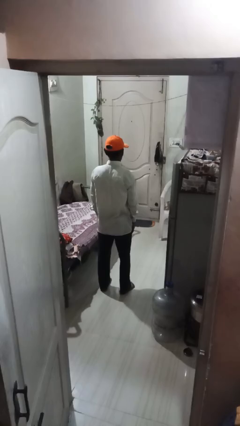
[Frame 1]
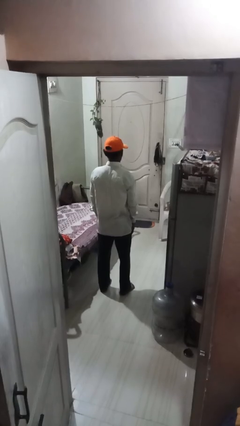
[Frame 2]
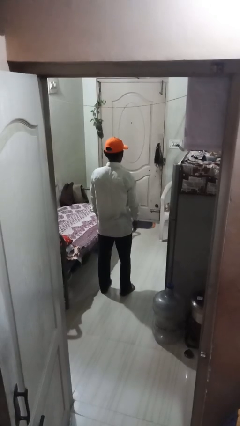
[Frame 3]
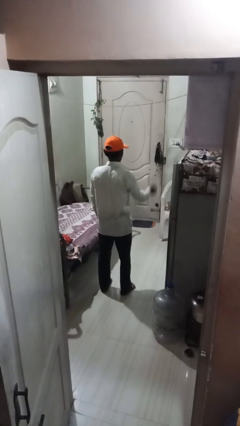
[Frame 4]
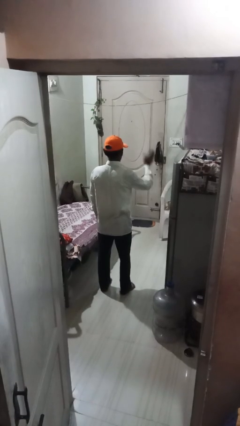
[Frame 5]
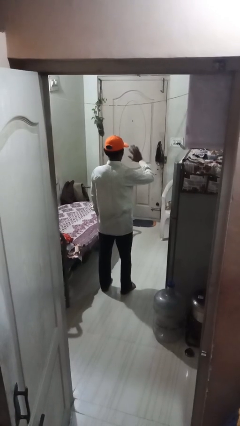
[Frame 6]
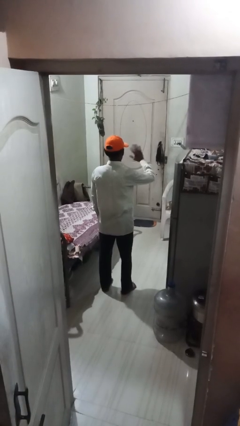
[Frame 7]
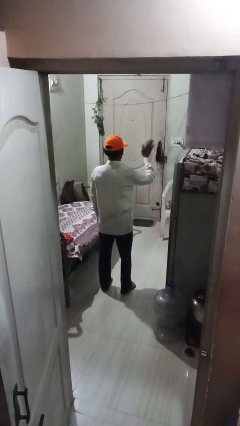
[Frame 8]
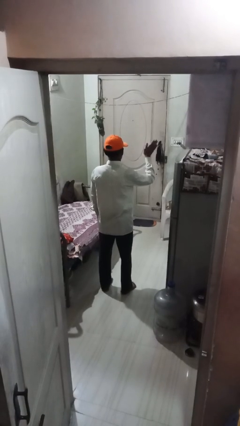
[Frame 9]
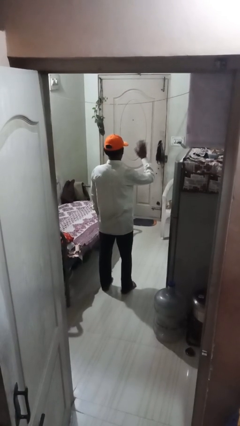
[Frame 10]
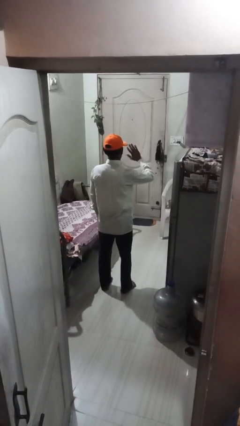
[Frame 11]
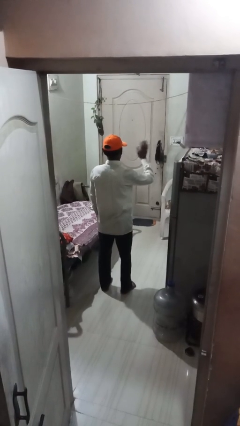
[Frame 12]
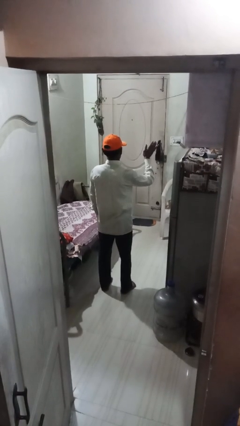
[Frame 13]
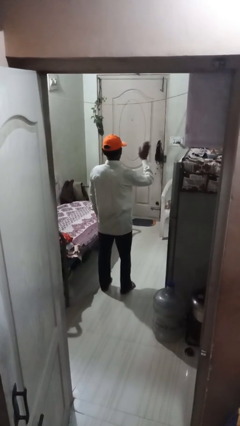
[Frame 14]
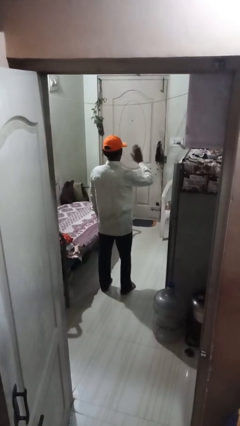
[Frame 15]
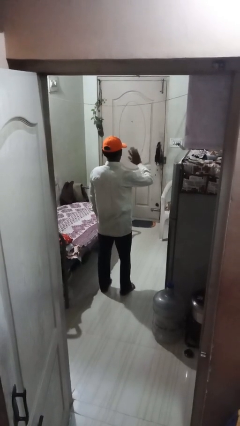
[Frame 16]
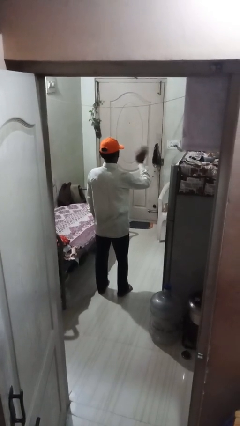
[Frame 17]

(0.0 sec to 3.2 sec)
person waves at person

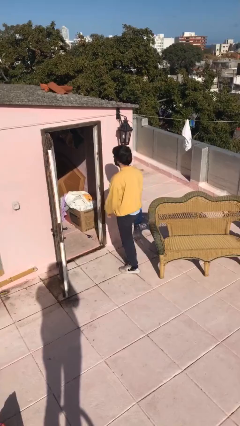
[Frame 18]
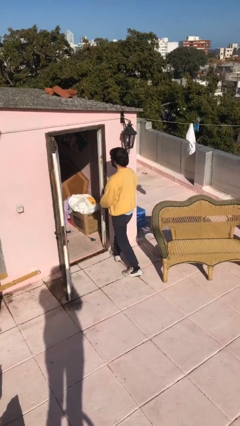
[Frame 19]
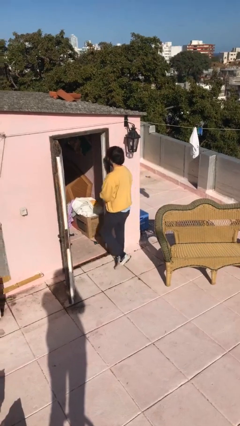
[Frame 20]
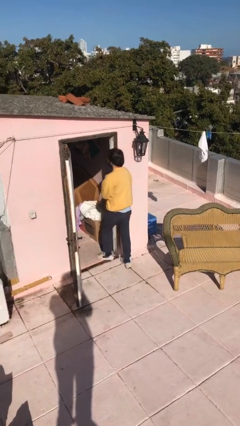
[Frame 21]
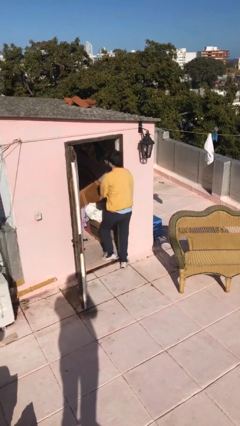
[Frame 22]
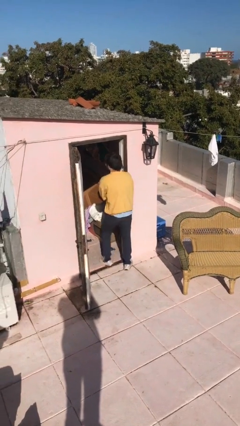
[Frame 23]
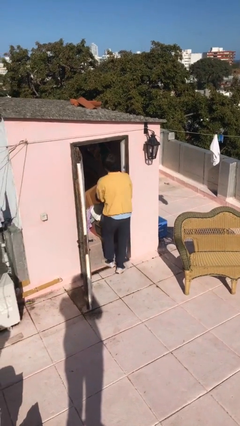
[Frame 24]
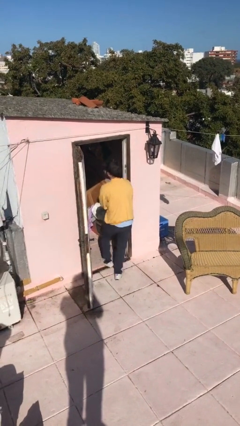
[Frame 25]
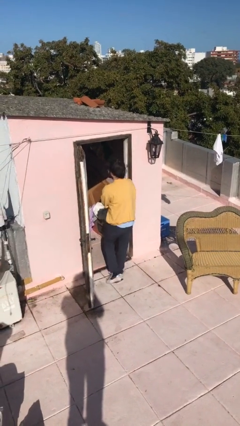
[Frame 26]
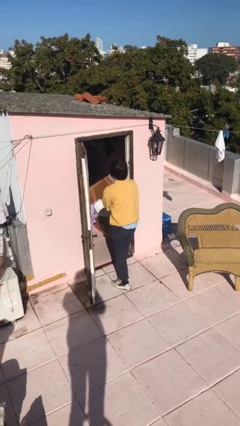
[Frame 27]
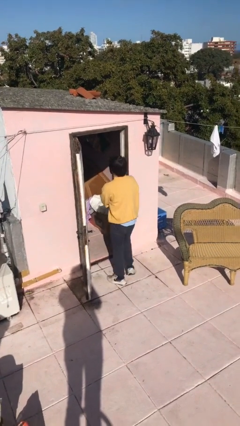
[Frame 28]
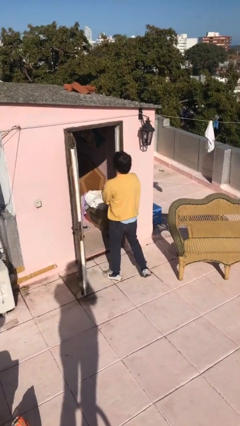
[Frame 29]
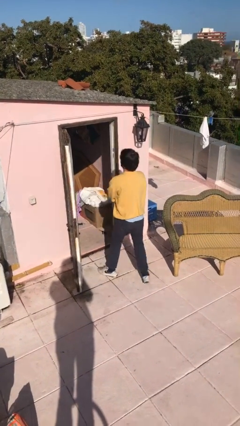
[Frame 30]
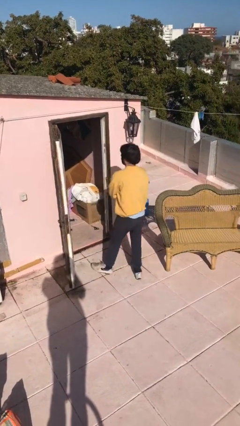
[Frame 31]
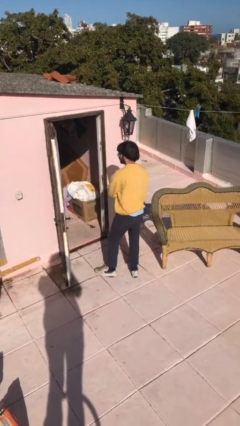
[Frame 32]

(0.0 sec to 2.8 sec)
person bumps into wall

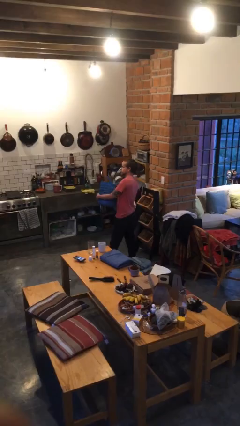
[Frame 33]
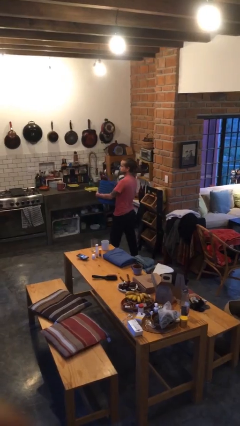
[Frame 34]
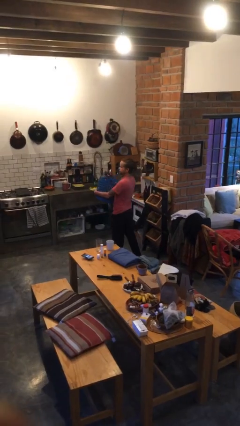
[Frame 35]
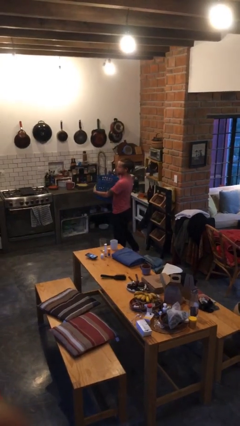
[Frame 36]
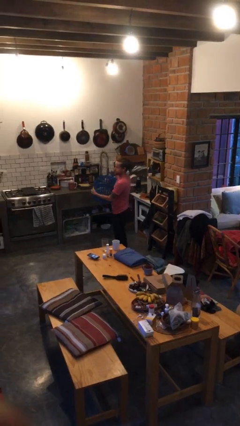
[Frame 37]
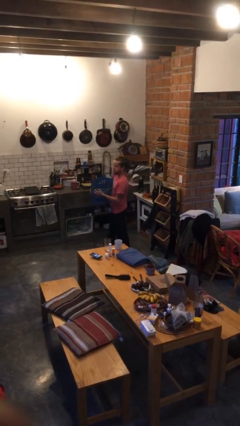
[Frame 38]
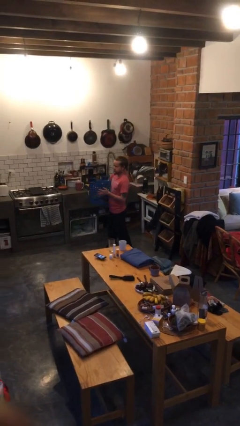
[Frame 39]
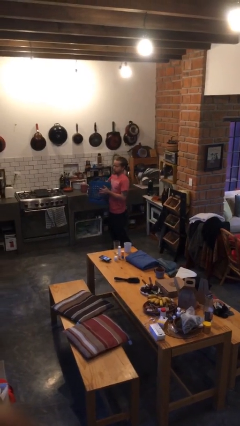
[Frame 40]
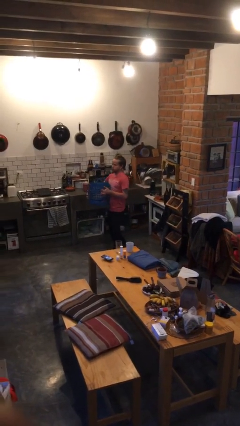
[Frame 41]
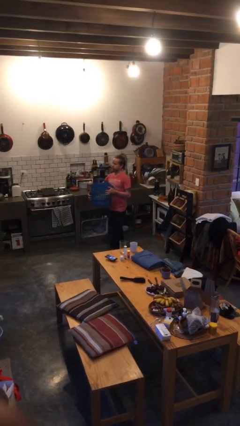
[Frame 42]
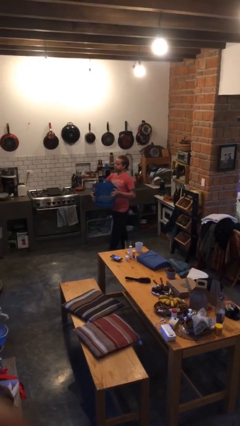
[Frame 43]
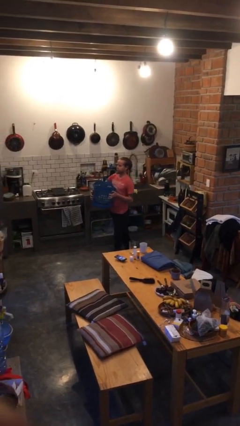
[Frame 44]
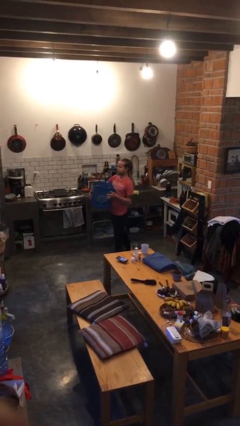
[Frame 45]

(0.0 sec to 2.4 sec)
person carries laundry basket

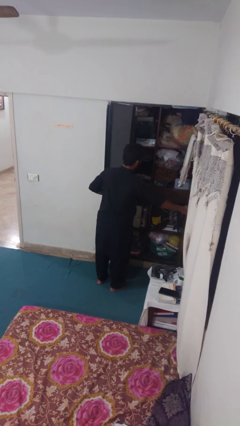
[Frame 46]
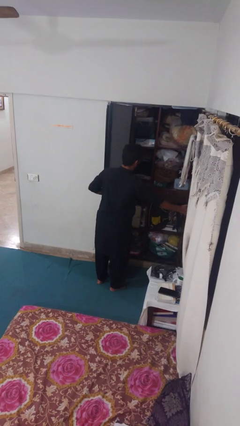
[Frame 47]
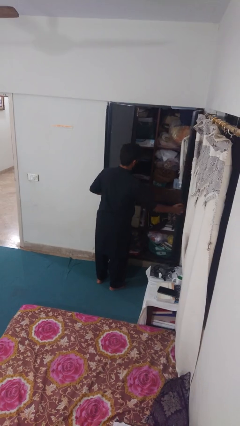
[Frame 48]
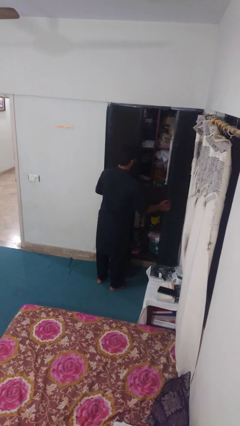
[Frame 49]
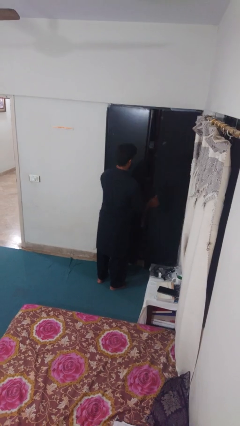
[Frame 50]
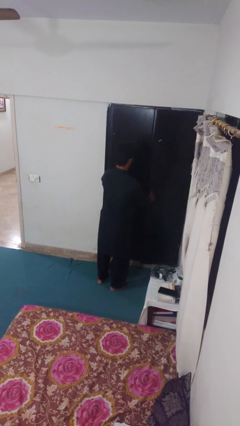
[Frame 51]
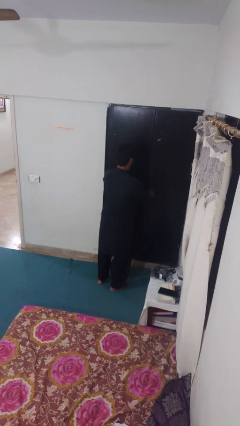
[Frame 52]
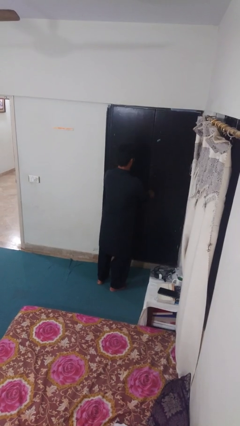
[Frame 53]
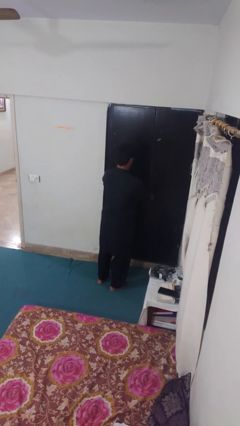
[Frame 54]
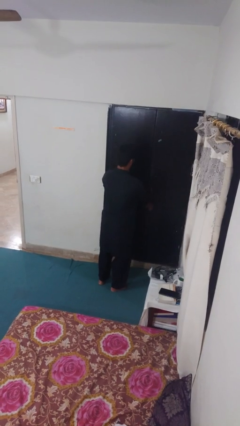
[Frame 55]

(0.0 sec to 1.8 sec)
person closes closet door

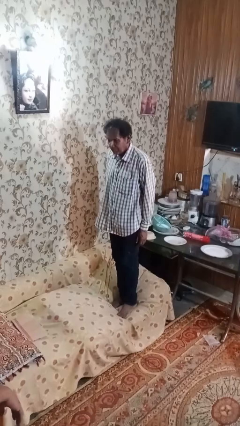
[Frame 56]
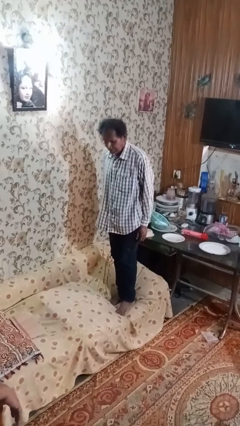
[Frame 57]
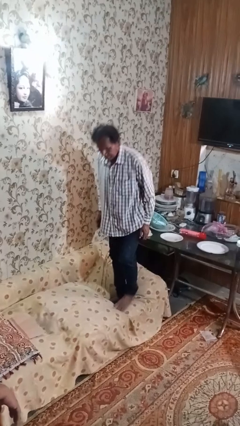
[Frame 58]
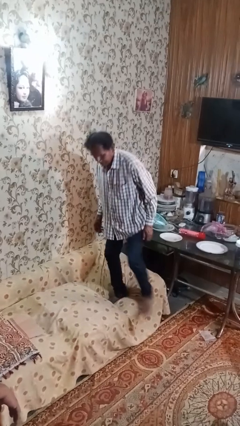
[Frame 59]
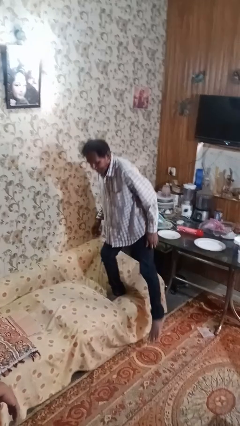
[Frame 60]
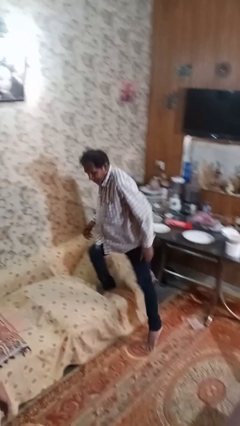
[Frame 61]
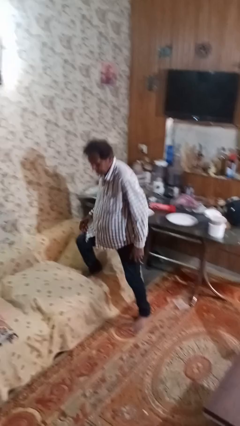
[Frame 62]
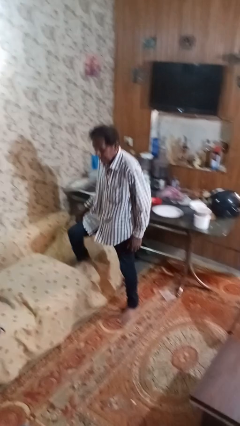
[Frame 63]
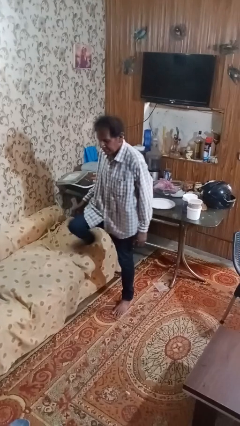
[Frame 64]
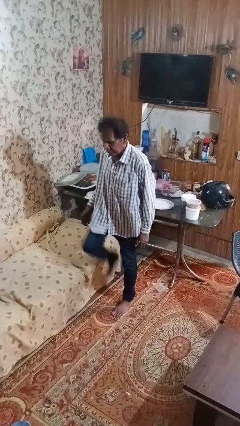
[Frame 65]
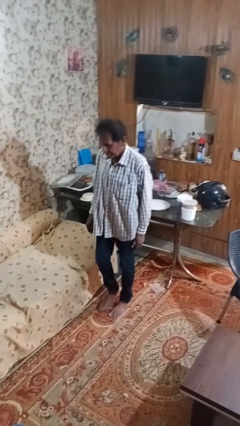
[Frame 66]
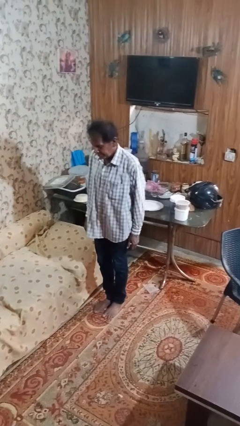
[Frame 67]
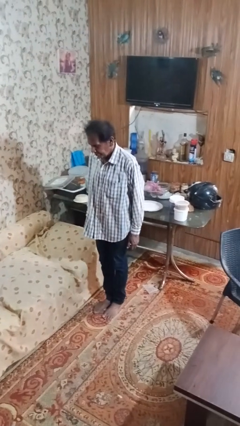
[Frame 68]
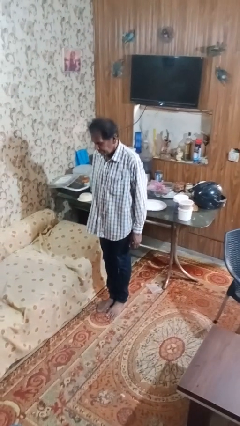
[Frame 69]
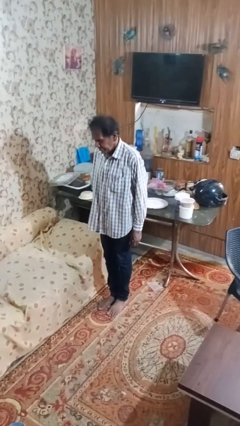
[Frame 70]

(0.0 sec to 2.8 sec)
person climbs off couch

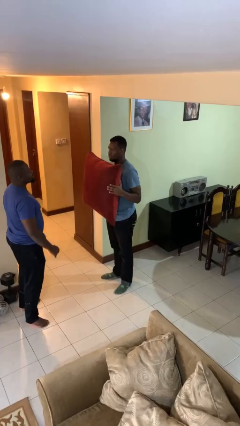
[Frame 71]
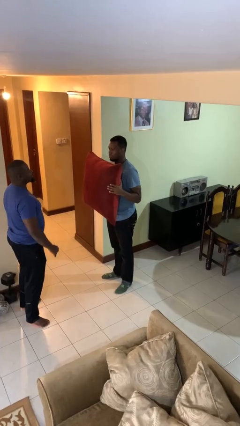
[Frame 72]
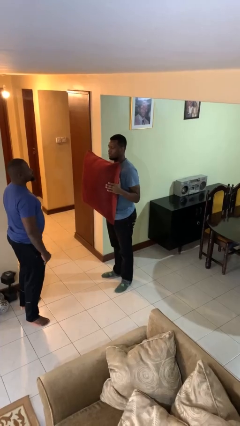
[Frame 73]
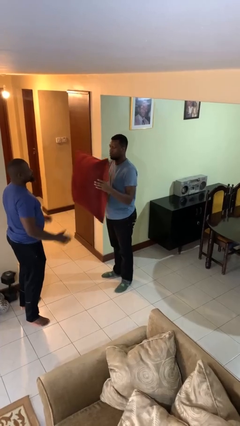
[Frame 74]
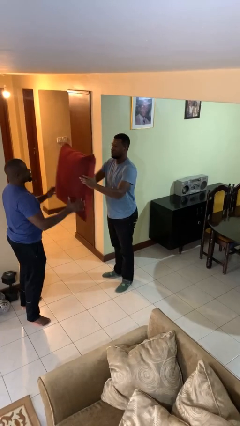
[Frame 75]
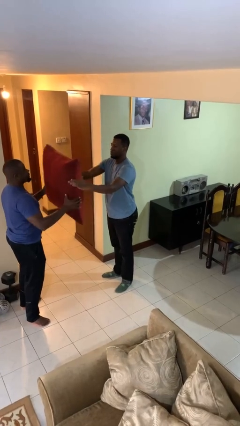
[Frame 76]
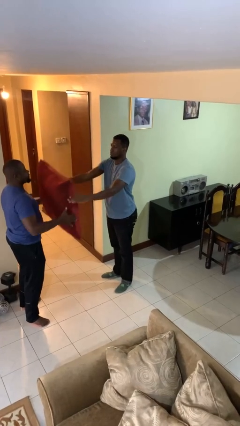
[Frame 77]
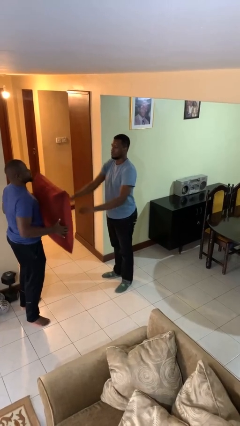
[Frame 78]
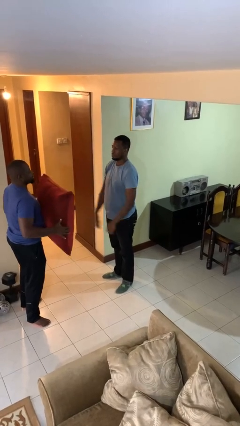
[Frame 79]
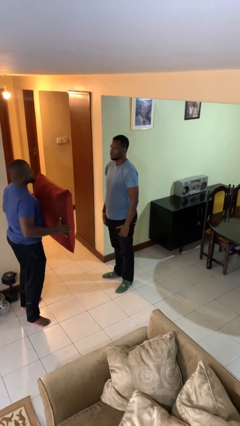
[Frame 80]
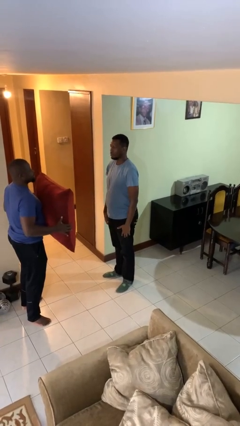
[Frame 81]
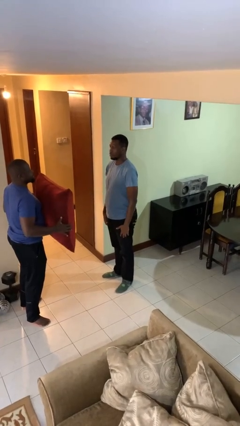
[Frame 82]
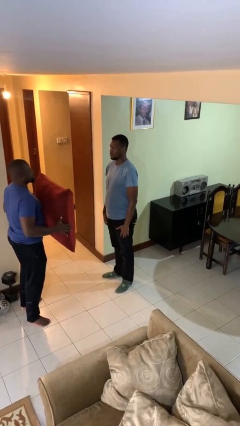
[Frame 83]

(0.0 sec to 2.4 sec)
person transfers object to person

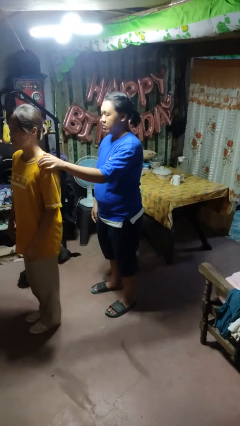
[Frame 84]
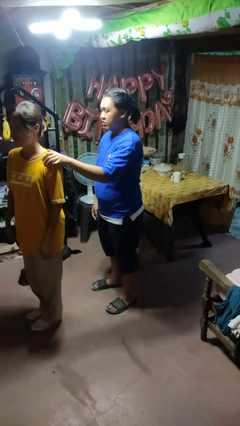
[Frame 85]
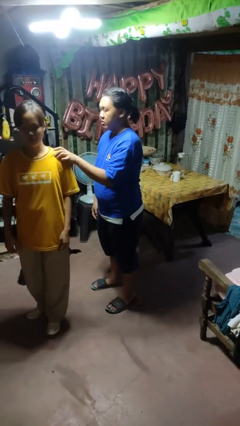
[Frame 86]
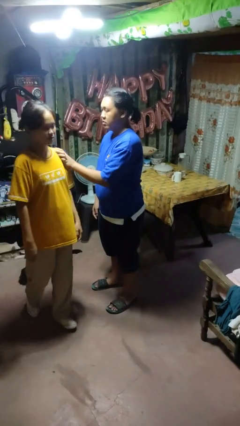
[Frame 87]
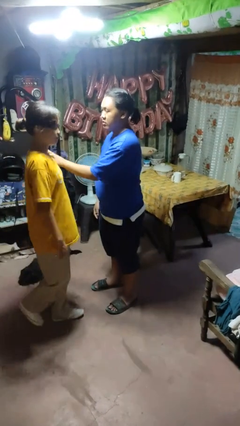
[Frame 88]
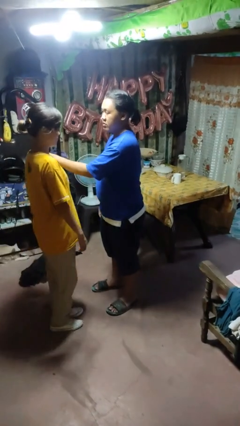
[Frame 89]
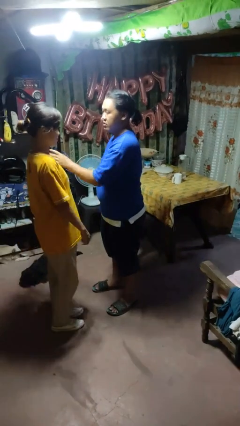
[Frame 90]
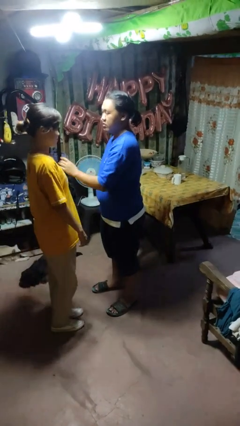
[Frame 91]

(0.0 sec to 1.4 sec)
person spins person around
